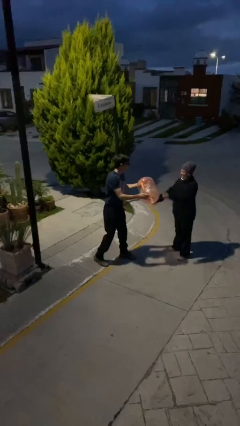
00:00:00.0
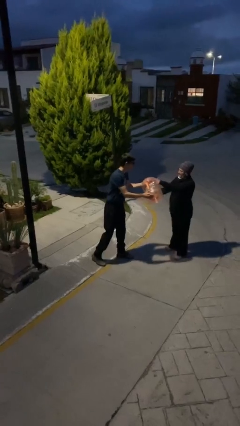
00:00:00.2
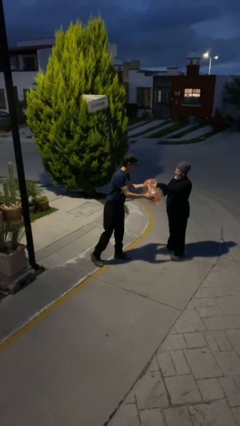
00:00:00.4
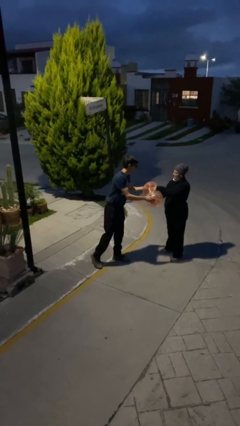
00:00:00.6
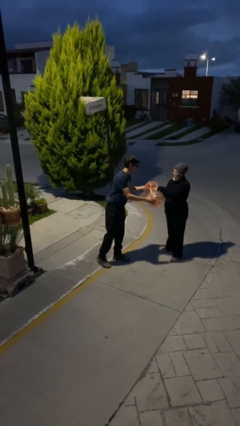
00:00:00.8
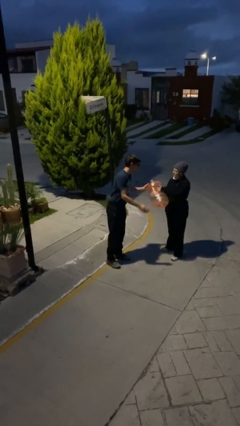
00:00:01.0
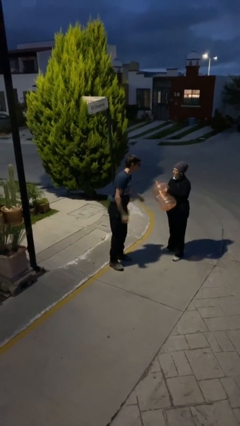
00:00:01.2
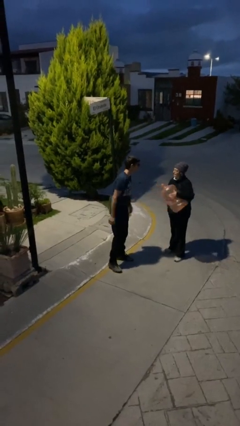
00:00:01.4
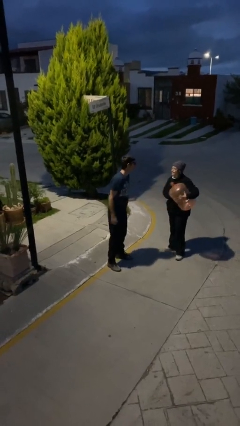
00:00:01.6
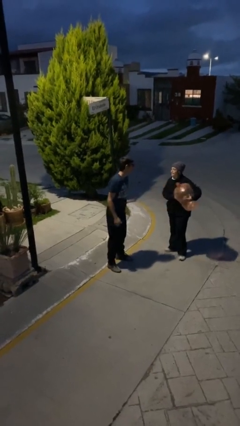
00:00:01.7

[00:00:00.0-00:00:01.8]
person transfers object to person

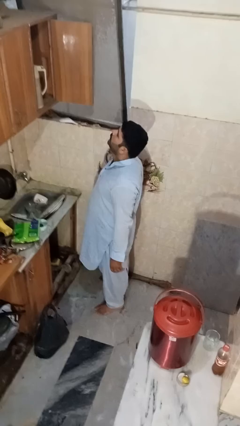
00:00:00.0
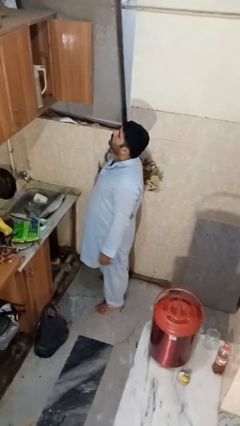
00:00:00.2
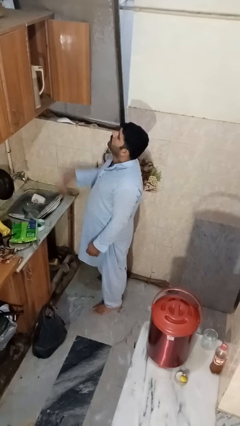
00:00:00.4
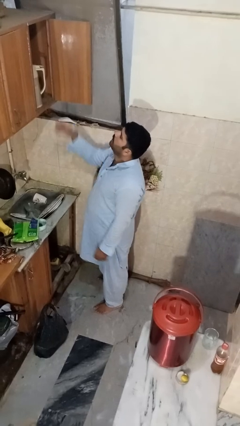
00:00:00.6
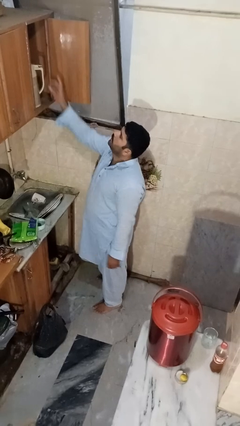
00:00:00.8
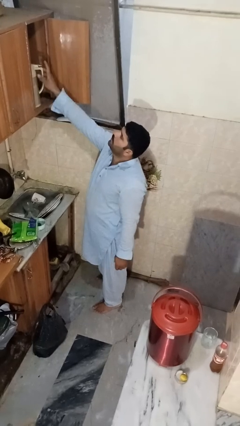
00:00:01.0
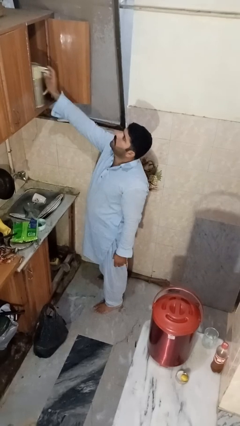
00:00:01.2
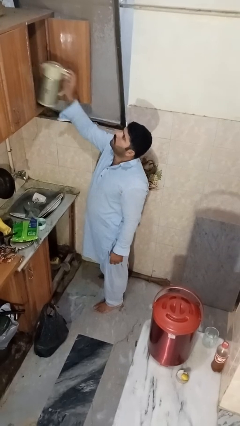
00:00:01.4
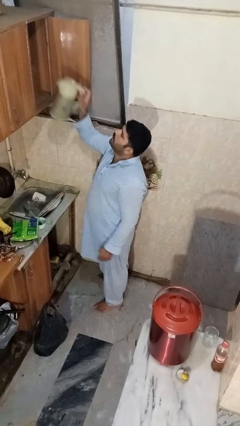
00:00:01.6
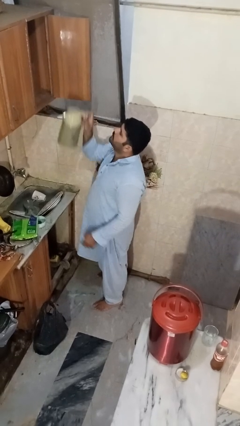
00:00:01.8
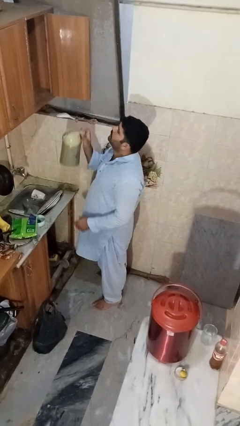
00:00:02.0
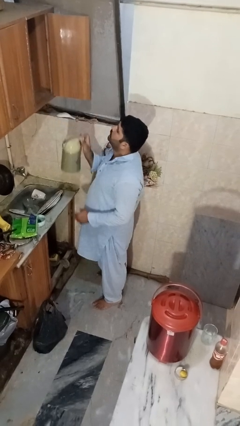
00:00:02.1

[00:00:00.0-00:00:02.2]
person takes object from cabinet

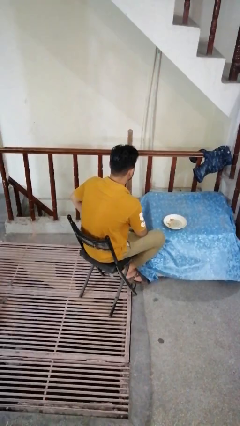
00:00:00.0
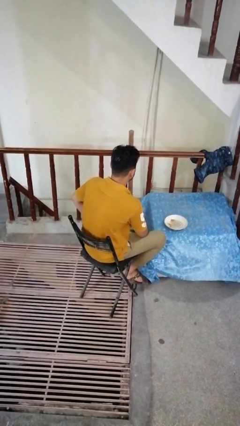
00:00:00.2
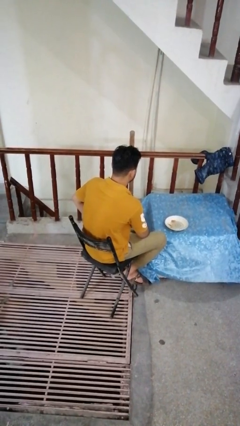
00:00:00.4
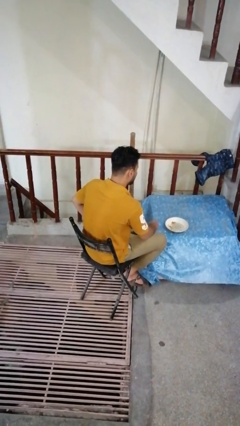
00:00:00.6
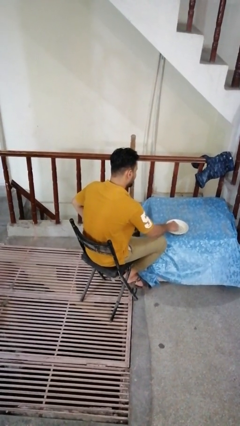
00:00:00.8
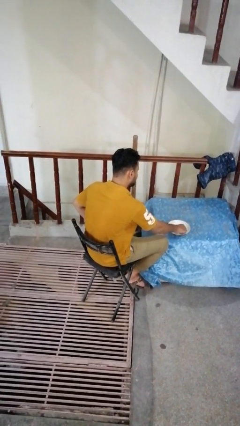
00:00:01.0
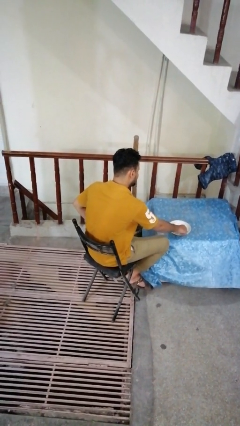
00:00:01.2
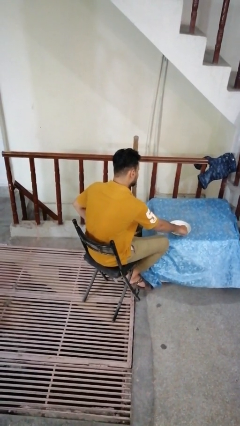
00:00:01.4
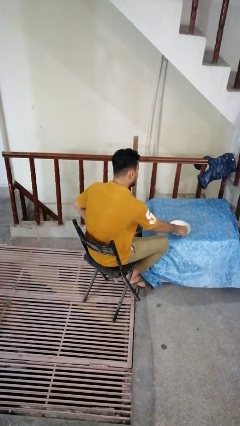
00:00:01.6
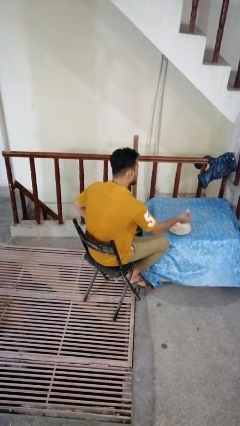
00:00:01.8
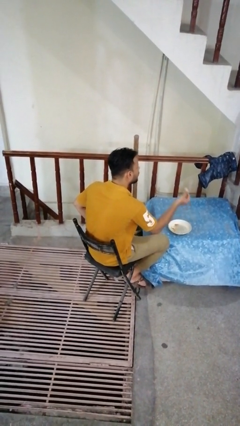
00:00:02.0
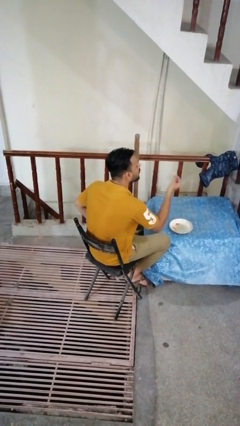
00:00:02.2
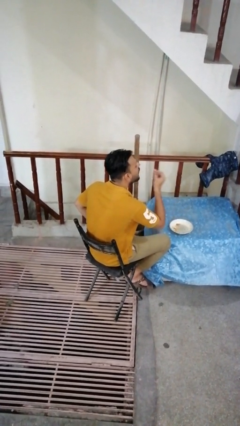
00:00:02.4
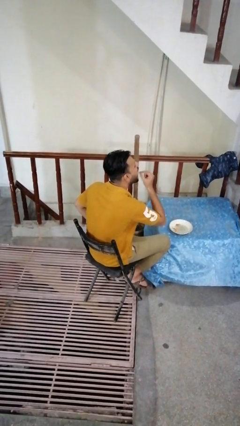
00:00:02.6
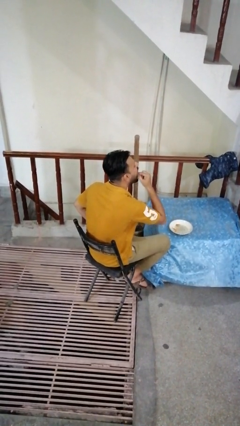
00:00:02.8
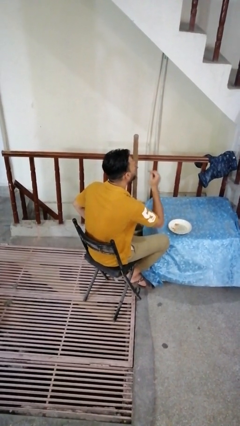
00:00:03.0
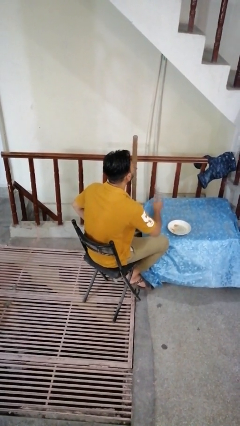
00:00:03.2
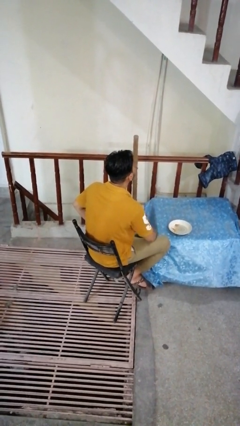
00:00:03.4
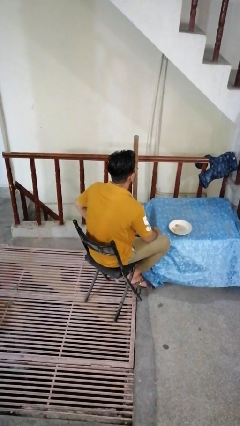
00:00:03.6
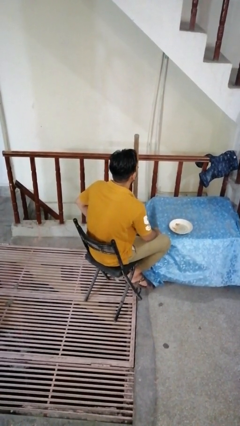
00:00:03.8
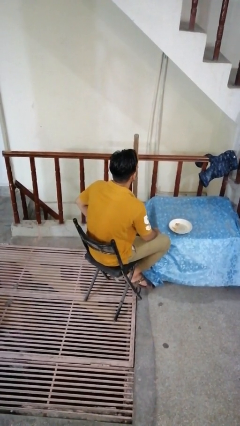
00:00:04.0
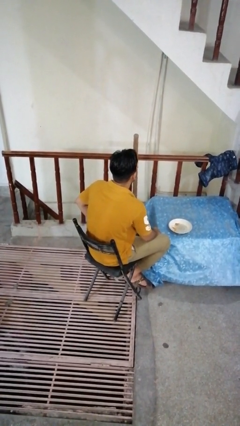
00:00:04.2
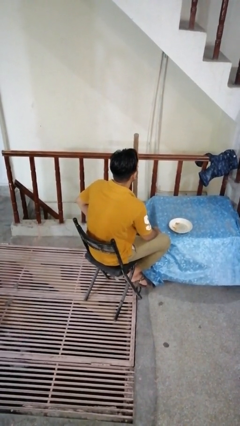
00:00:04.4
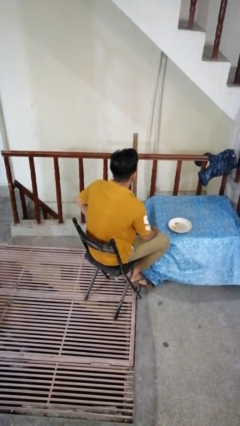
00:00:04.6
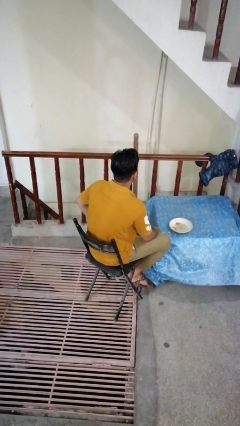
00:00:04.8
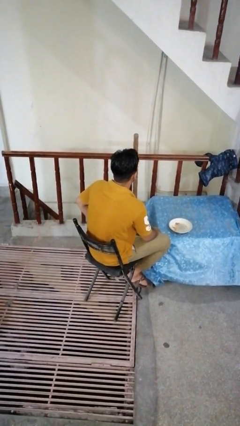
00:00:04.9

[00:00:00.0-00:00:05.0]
person eats with hands

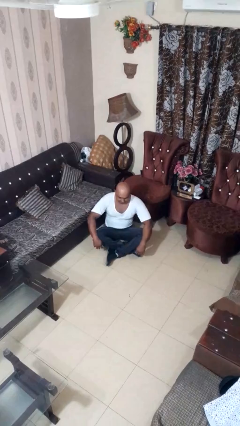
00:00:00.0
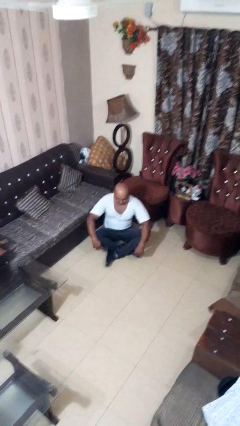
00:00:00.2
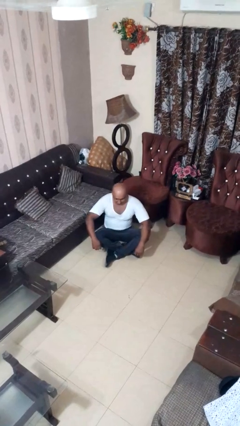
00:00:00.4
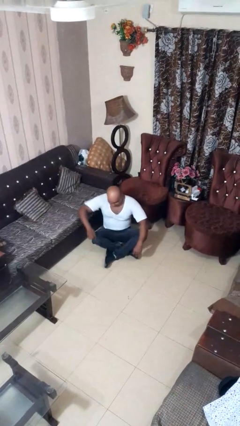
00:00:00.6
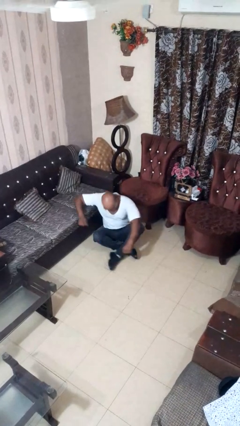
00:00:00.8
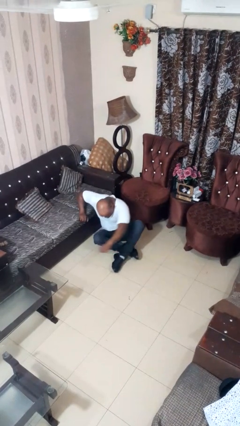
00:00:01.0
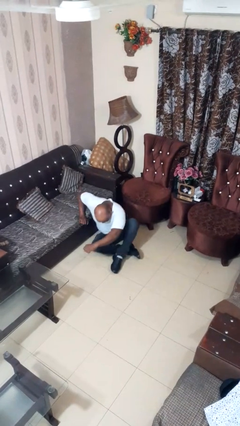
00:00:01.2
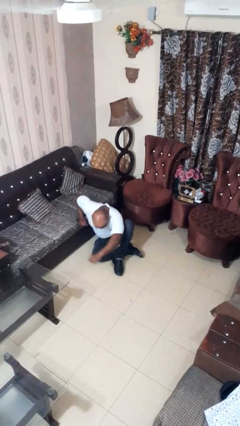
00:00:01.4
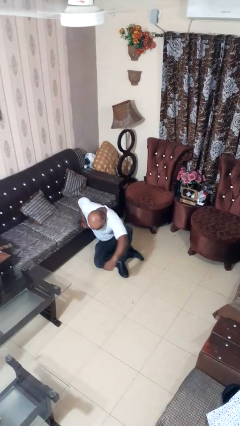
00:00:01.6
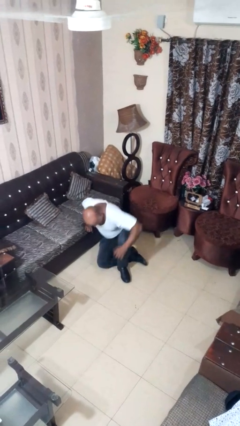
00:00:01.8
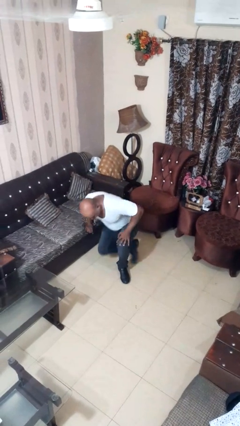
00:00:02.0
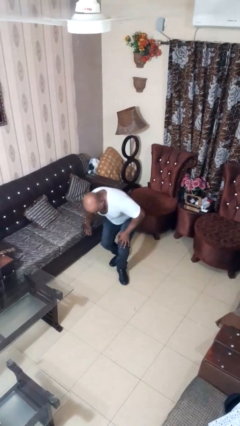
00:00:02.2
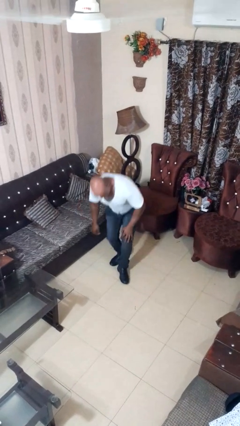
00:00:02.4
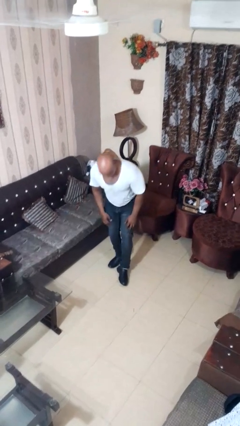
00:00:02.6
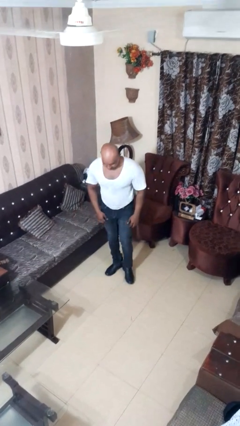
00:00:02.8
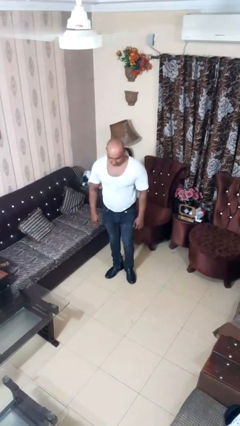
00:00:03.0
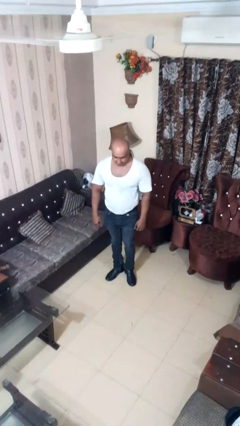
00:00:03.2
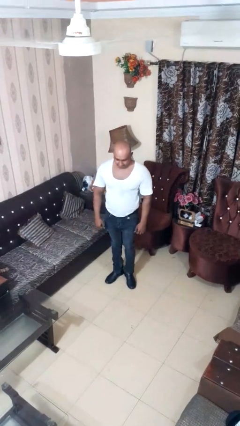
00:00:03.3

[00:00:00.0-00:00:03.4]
person stands up from floor

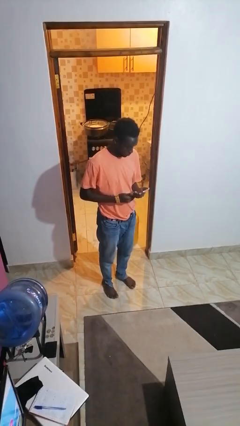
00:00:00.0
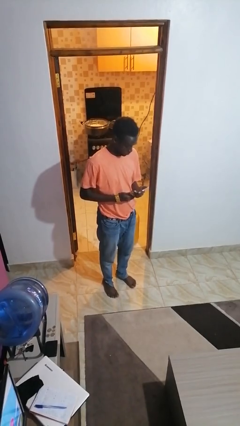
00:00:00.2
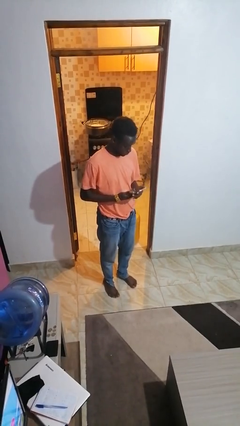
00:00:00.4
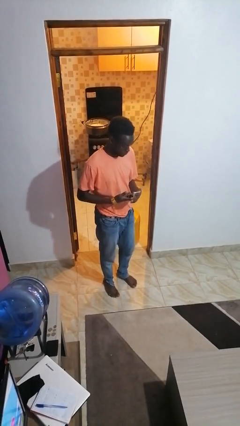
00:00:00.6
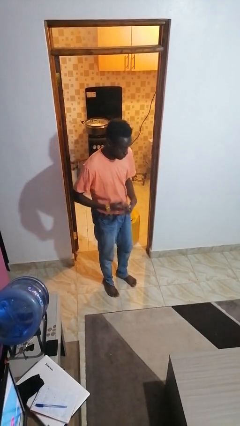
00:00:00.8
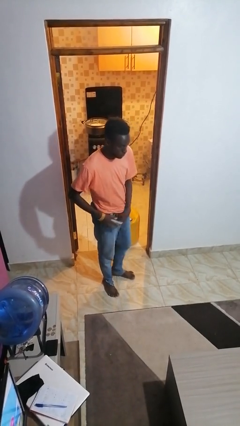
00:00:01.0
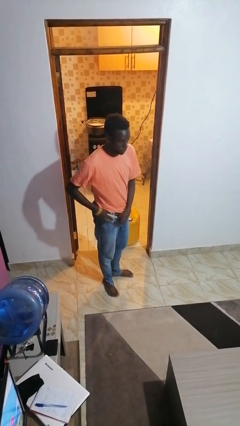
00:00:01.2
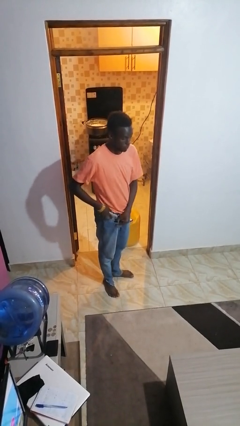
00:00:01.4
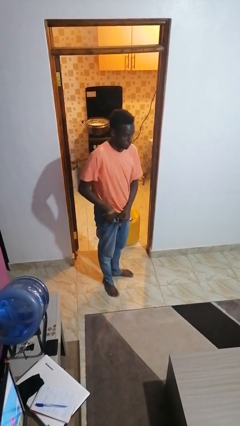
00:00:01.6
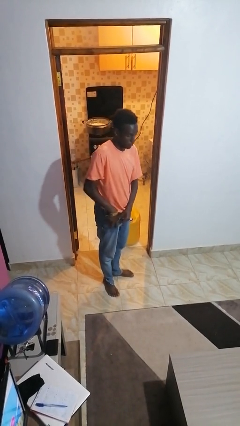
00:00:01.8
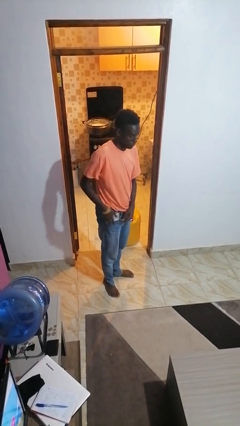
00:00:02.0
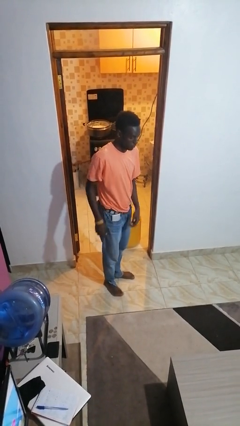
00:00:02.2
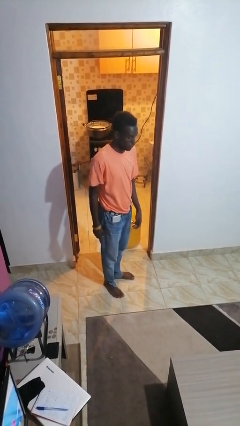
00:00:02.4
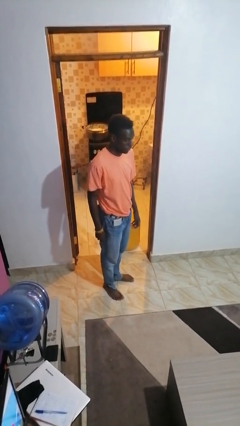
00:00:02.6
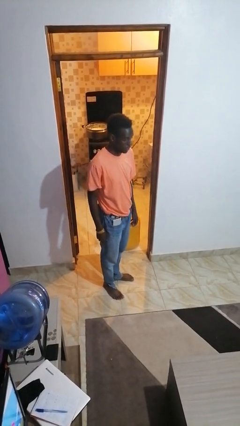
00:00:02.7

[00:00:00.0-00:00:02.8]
person puts phone into pocket

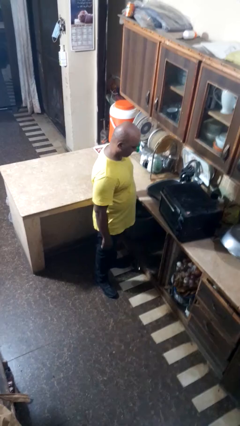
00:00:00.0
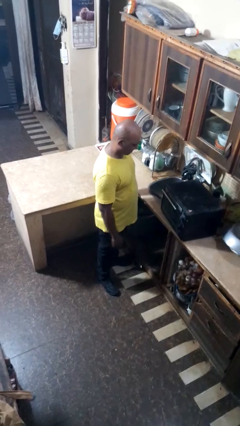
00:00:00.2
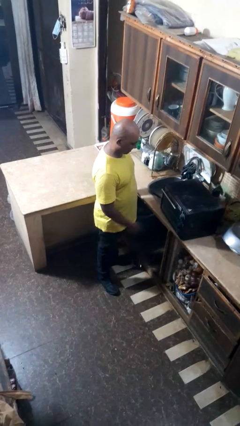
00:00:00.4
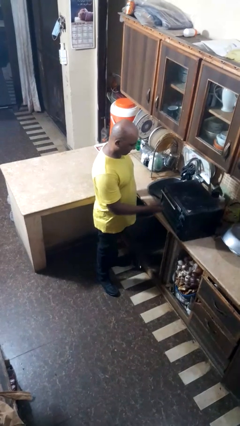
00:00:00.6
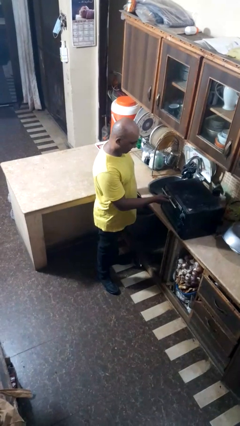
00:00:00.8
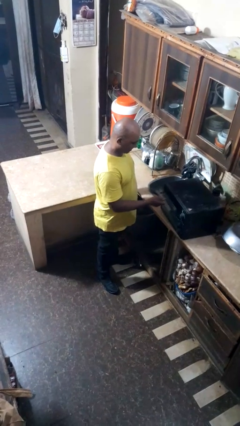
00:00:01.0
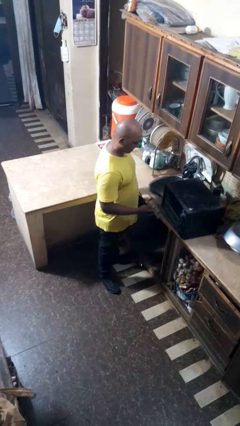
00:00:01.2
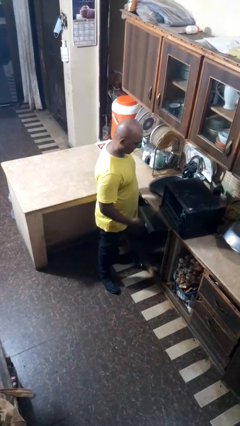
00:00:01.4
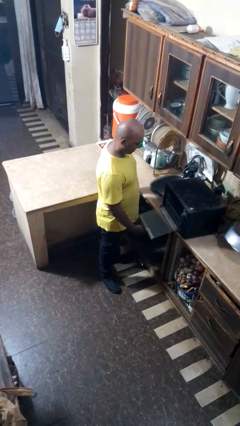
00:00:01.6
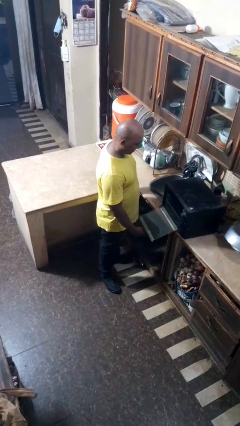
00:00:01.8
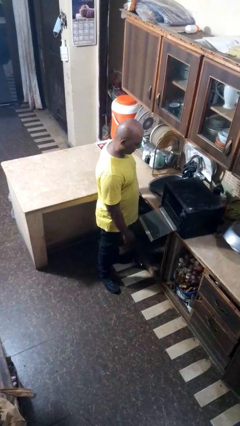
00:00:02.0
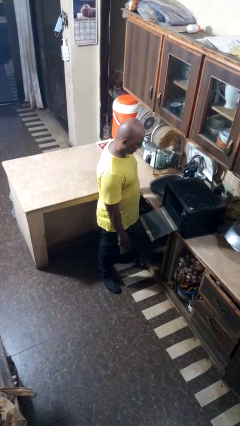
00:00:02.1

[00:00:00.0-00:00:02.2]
person opens oven door
